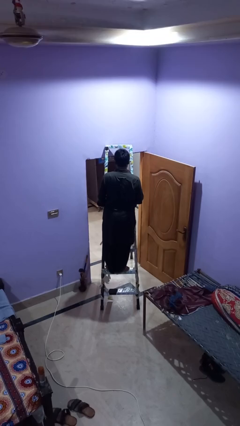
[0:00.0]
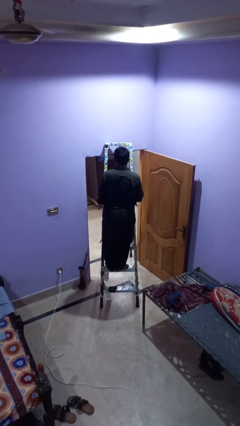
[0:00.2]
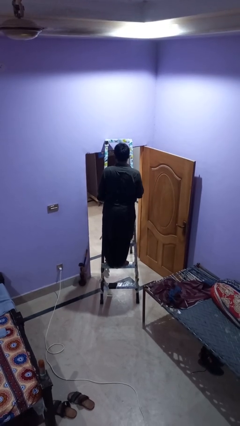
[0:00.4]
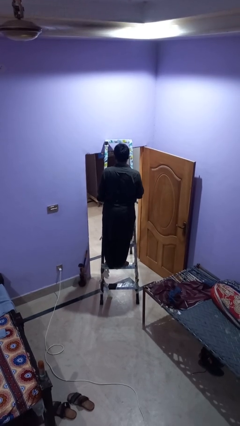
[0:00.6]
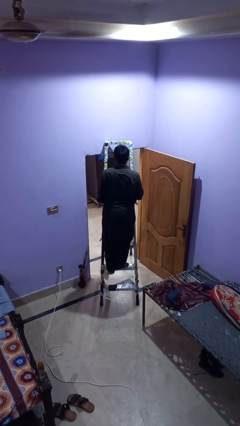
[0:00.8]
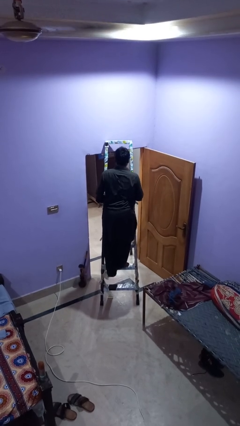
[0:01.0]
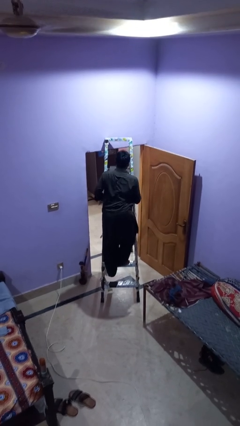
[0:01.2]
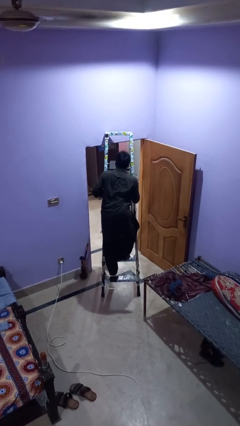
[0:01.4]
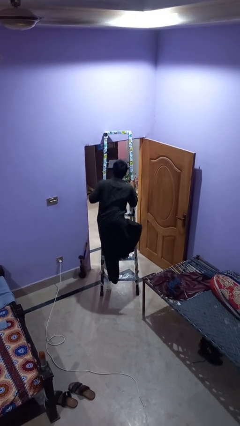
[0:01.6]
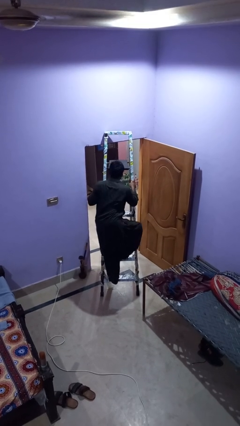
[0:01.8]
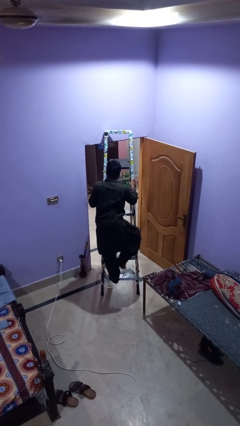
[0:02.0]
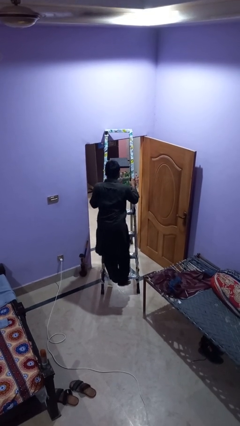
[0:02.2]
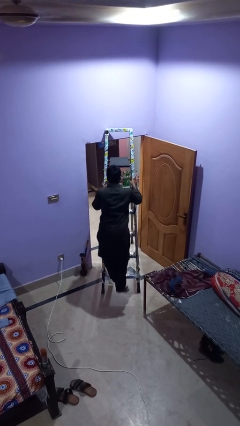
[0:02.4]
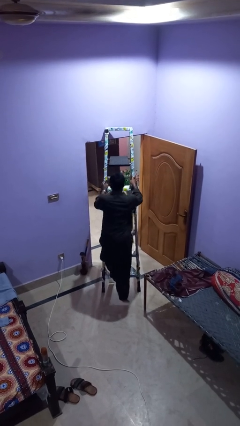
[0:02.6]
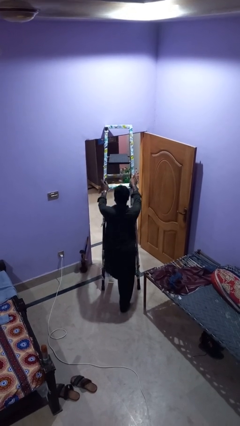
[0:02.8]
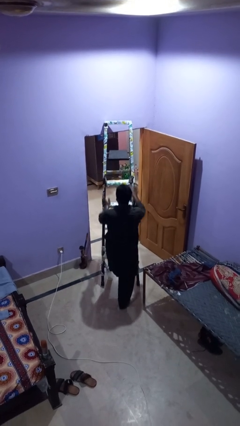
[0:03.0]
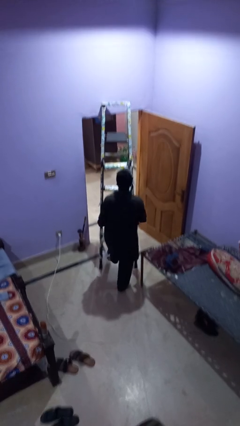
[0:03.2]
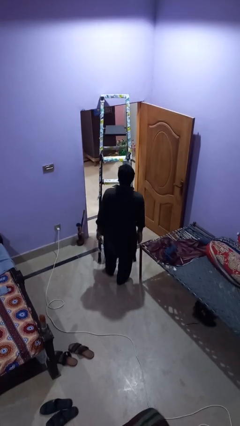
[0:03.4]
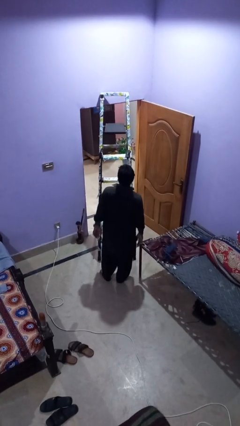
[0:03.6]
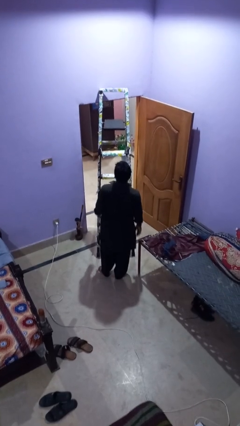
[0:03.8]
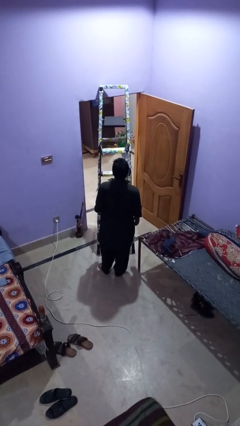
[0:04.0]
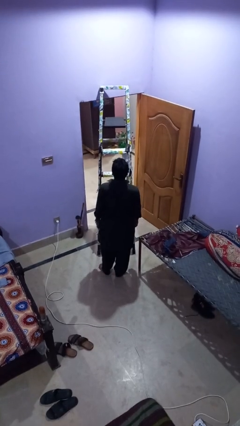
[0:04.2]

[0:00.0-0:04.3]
person climbs down ladder

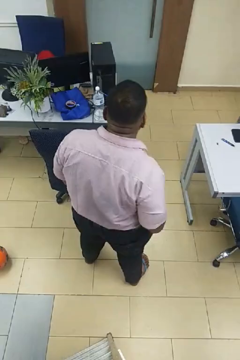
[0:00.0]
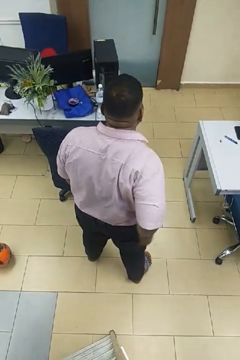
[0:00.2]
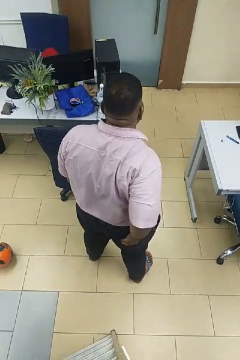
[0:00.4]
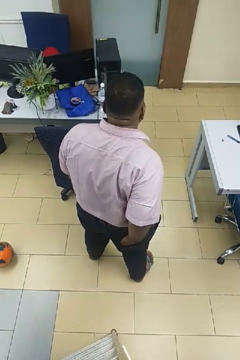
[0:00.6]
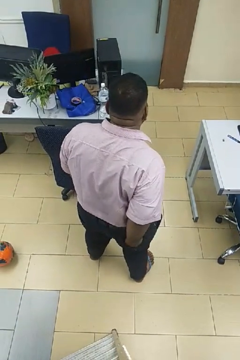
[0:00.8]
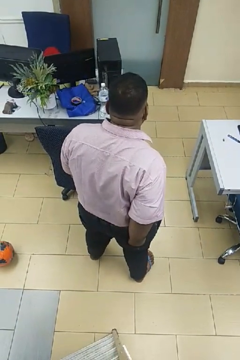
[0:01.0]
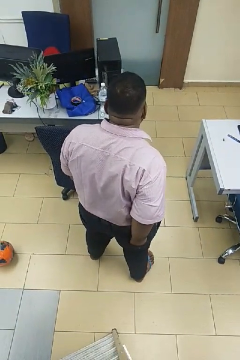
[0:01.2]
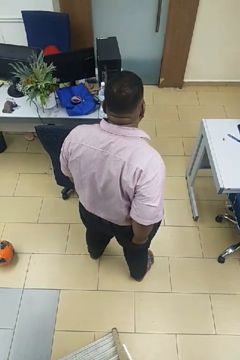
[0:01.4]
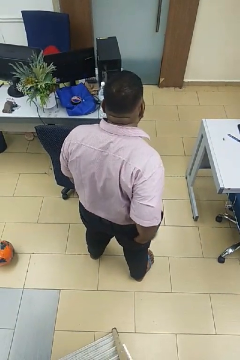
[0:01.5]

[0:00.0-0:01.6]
person puts hands in back pockets

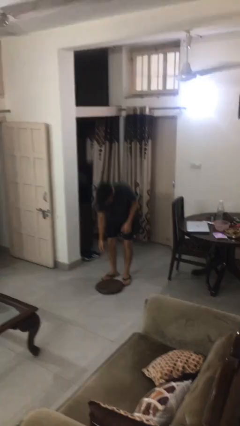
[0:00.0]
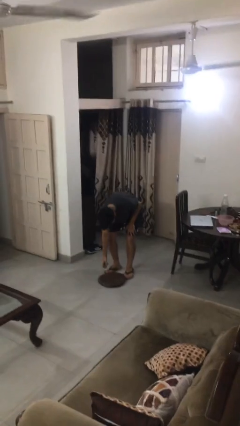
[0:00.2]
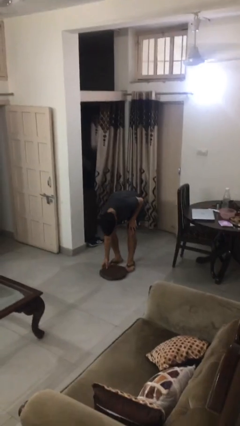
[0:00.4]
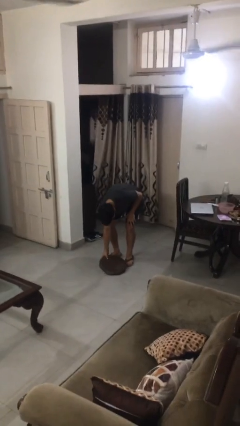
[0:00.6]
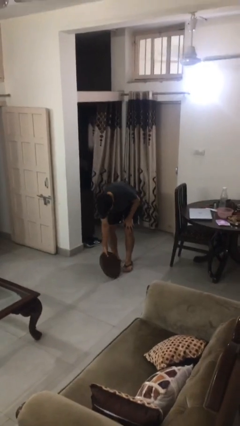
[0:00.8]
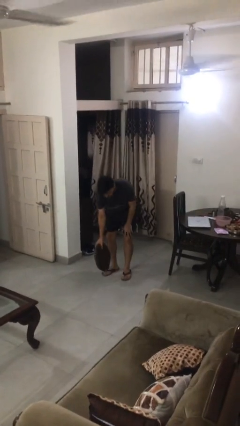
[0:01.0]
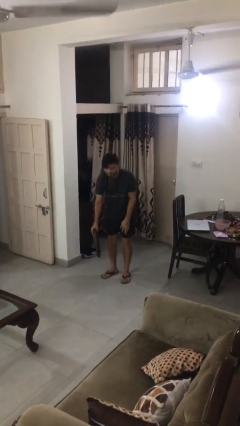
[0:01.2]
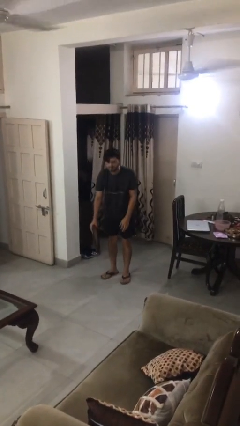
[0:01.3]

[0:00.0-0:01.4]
person picks up object from floor

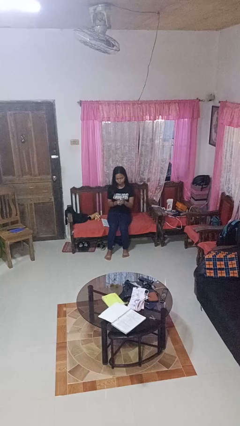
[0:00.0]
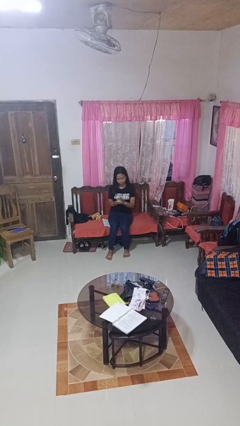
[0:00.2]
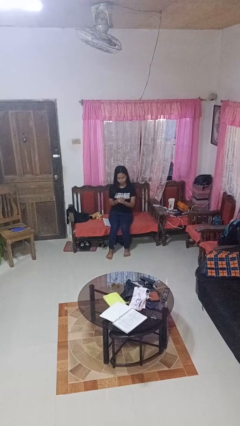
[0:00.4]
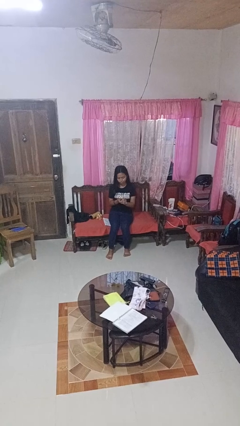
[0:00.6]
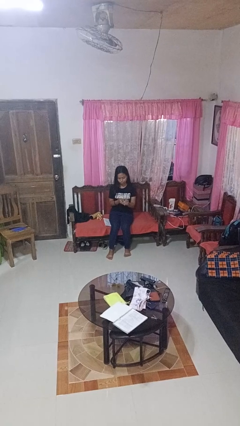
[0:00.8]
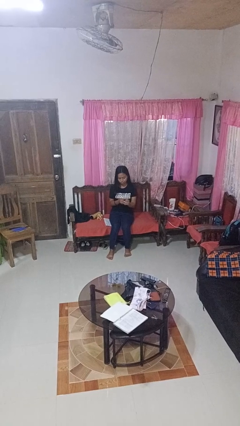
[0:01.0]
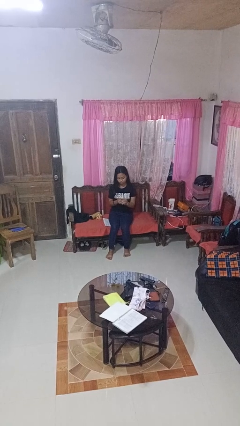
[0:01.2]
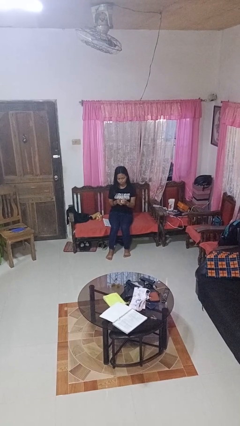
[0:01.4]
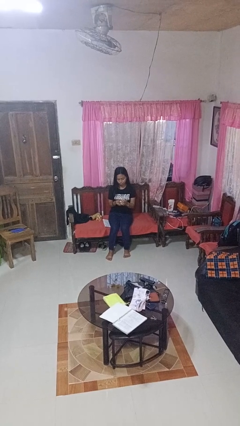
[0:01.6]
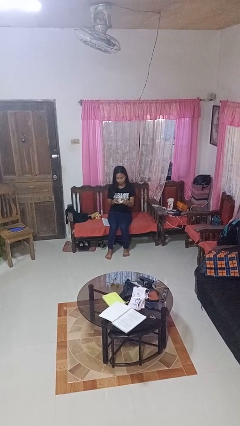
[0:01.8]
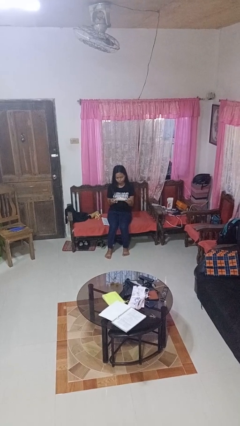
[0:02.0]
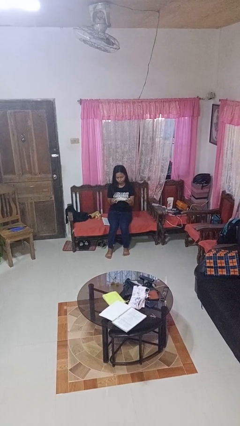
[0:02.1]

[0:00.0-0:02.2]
person crumples paper

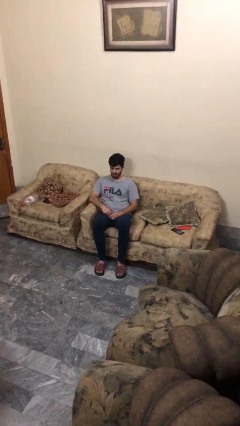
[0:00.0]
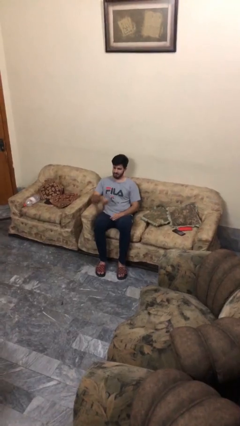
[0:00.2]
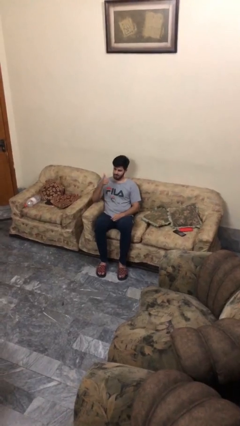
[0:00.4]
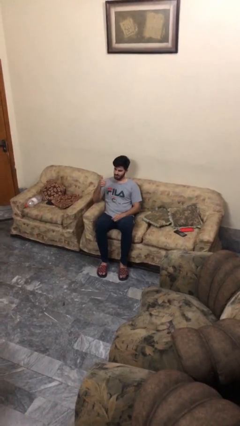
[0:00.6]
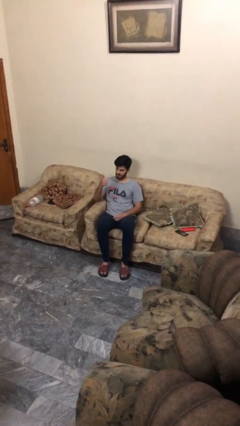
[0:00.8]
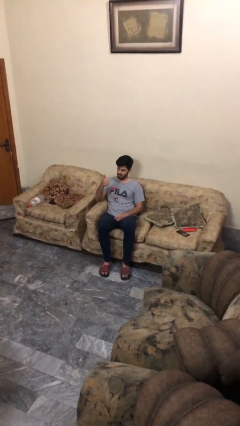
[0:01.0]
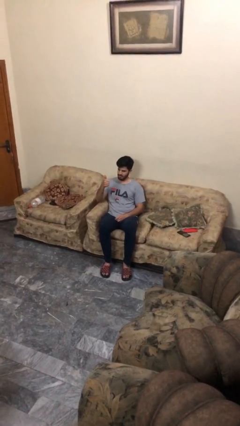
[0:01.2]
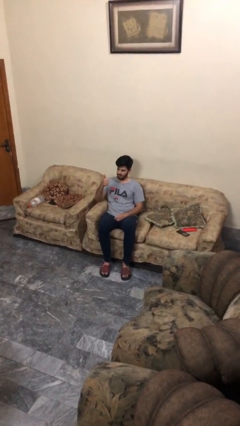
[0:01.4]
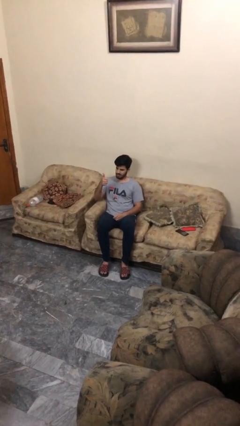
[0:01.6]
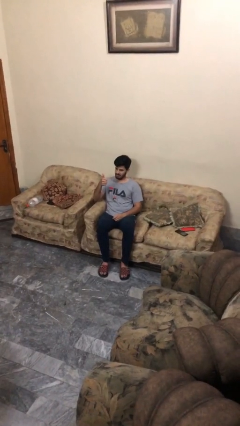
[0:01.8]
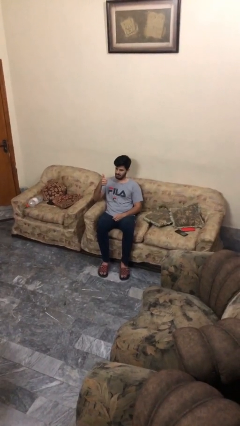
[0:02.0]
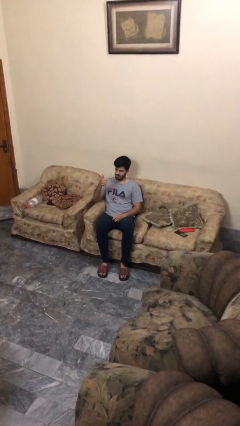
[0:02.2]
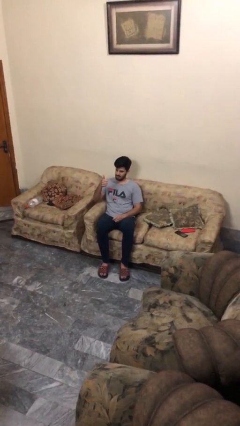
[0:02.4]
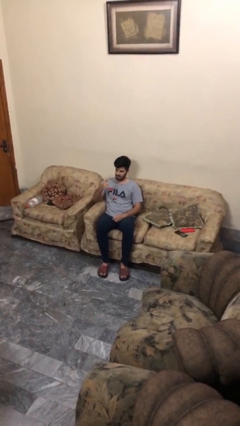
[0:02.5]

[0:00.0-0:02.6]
person gestures thumbs up

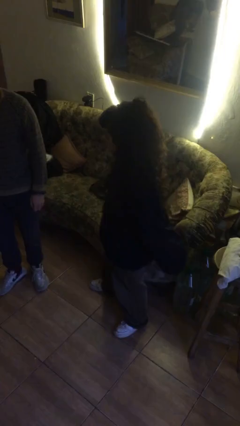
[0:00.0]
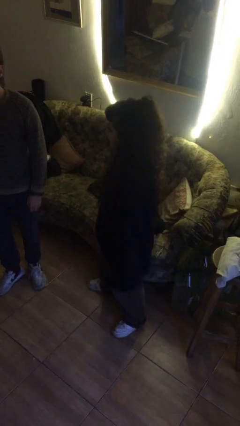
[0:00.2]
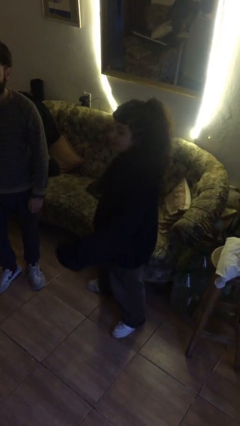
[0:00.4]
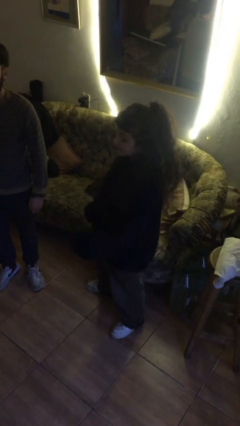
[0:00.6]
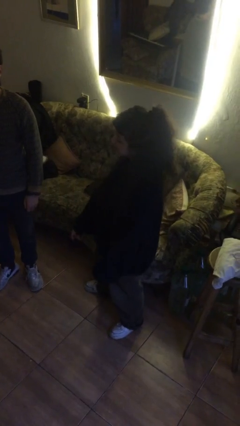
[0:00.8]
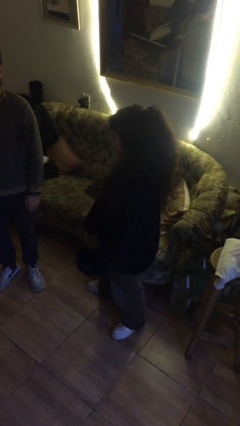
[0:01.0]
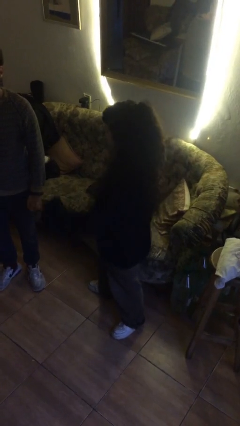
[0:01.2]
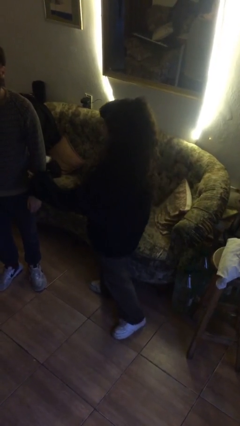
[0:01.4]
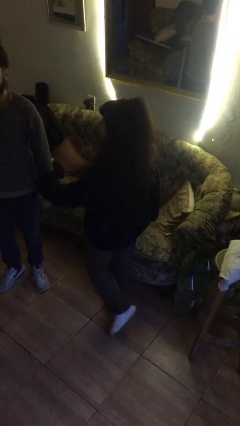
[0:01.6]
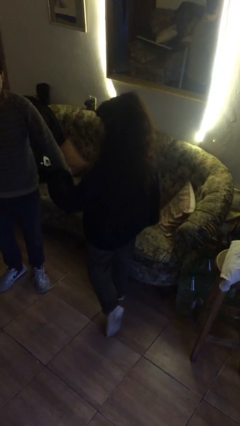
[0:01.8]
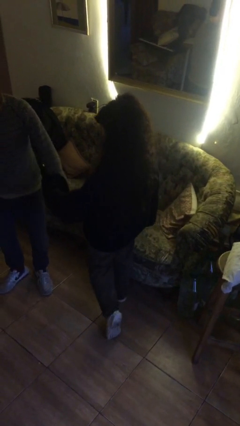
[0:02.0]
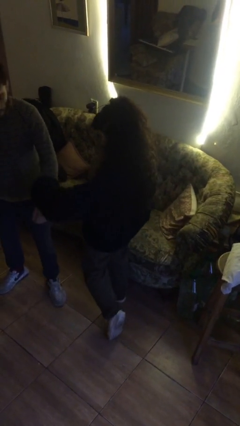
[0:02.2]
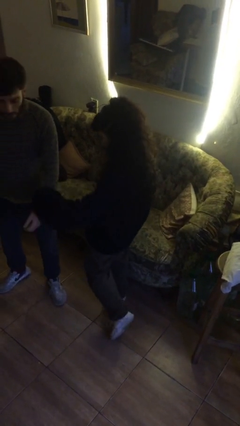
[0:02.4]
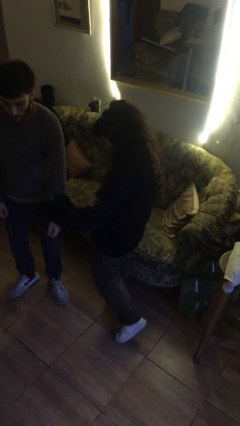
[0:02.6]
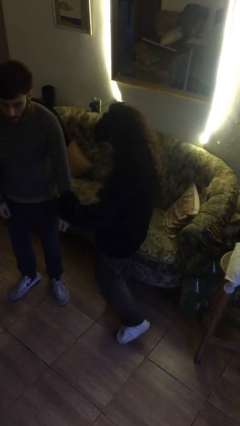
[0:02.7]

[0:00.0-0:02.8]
person grabs person by forearm

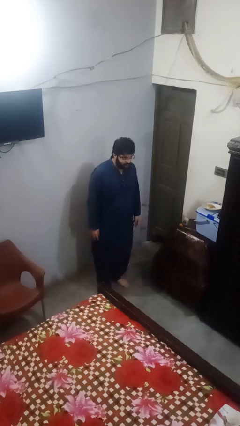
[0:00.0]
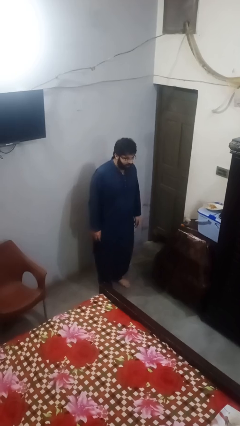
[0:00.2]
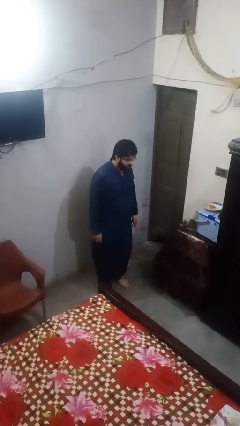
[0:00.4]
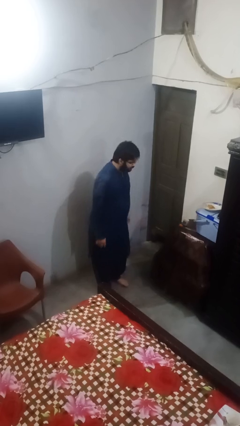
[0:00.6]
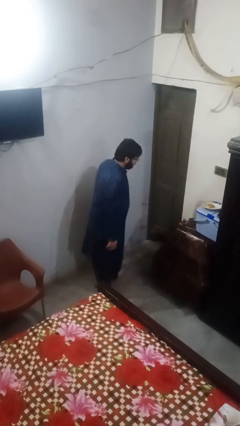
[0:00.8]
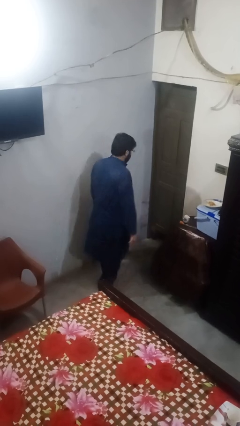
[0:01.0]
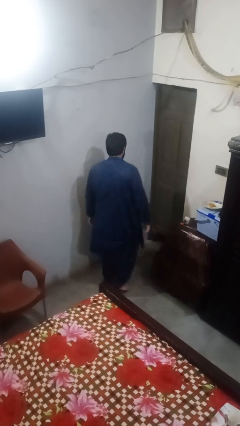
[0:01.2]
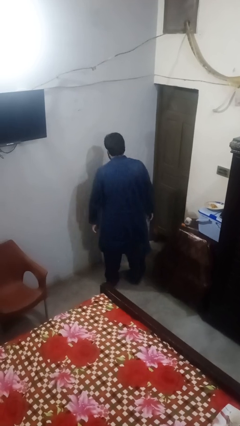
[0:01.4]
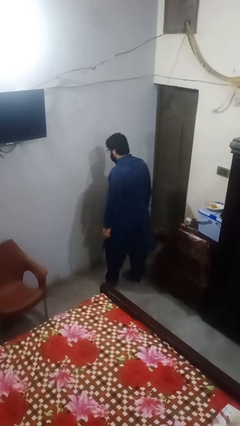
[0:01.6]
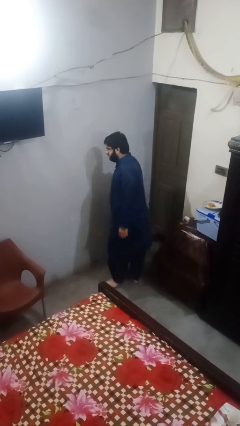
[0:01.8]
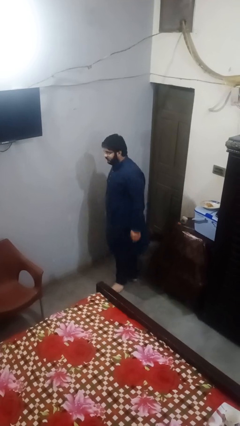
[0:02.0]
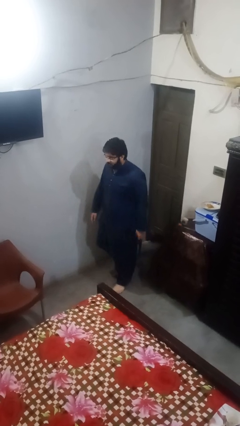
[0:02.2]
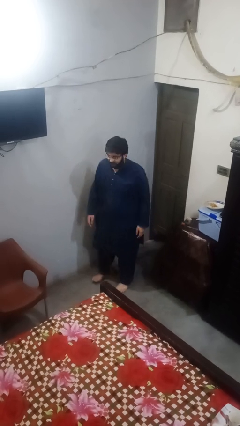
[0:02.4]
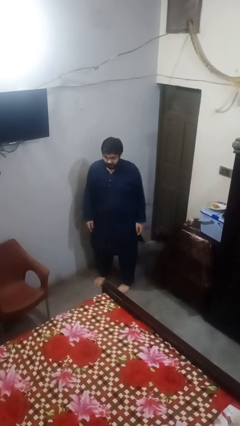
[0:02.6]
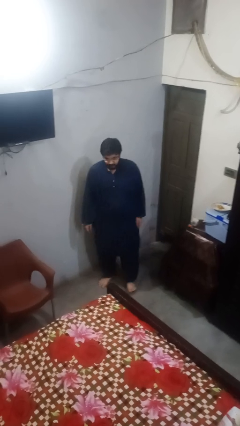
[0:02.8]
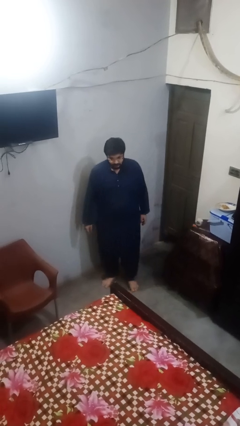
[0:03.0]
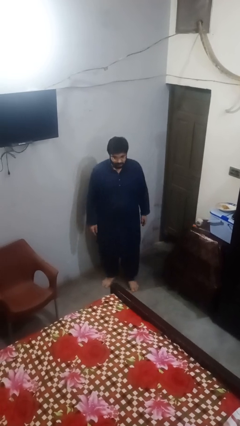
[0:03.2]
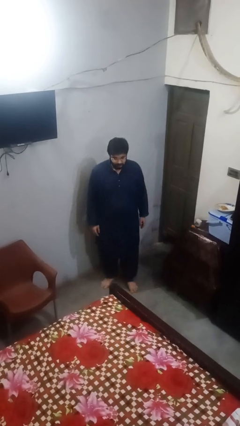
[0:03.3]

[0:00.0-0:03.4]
person twirls
